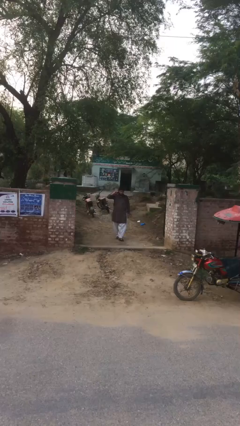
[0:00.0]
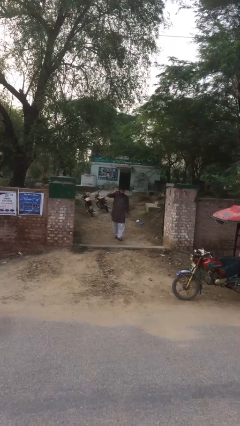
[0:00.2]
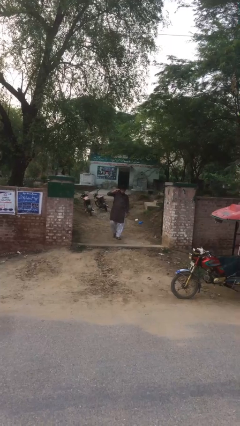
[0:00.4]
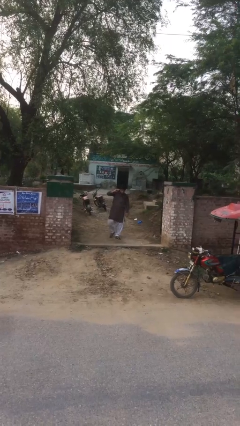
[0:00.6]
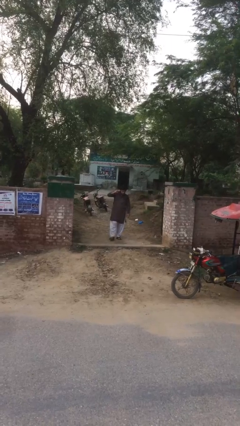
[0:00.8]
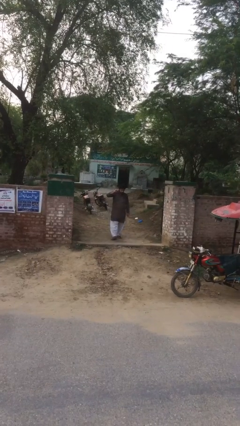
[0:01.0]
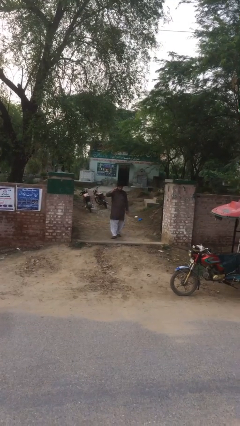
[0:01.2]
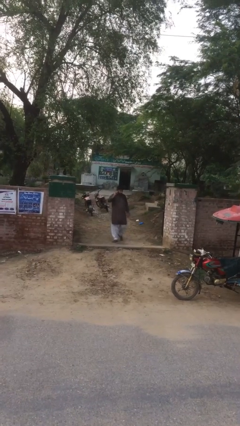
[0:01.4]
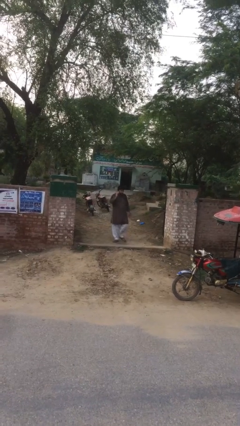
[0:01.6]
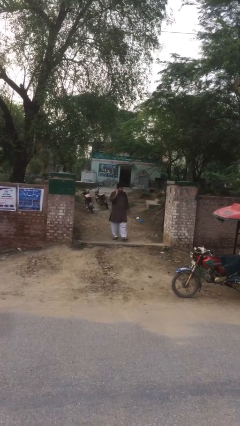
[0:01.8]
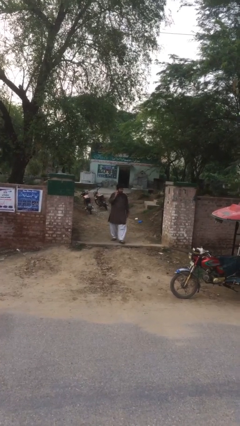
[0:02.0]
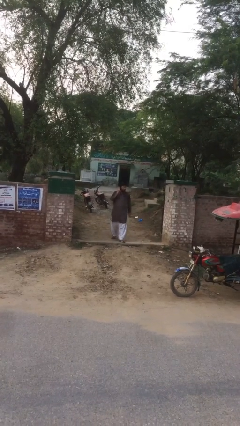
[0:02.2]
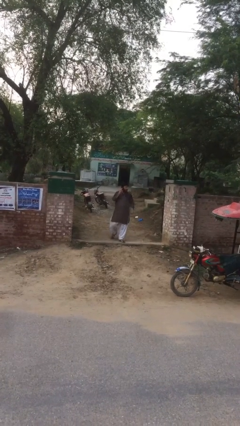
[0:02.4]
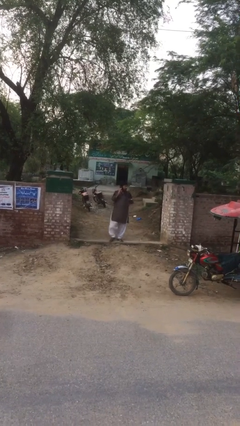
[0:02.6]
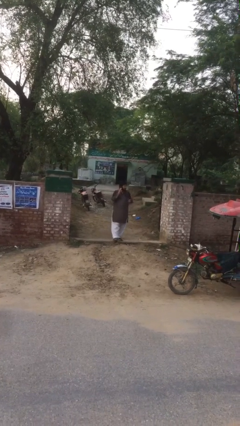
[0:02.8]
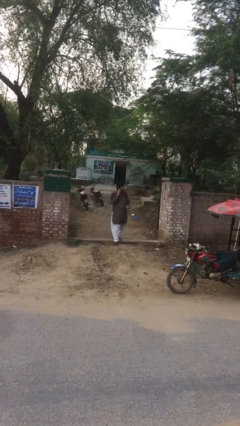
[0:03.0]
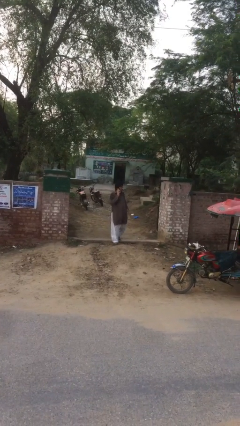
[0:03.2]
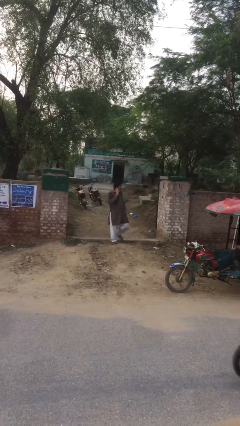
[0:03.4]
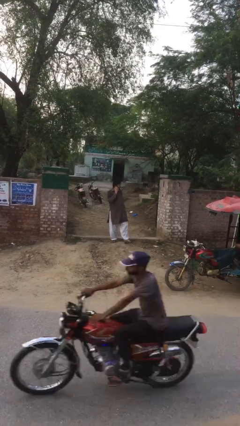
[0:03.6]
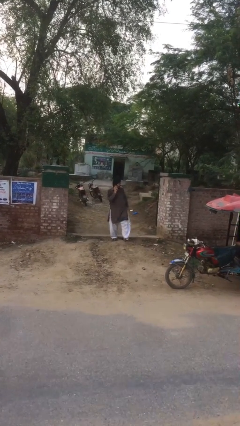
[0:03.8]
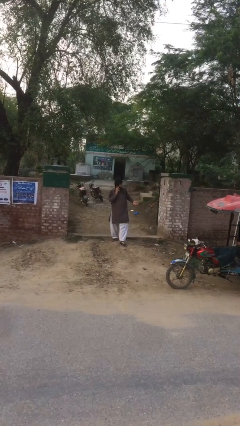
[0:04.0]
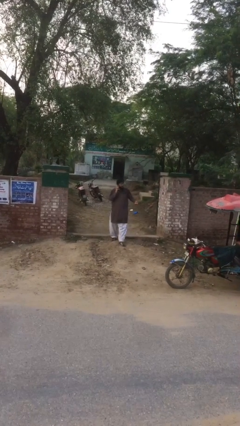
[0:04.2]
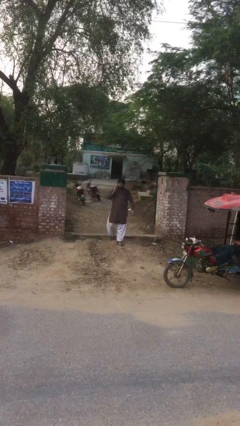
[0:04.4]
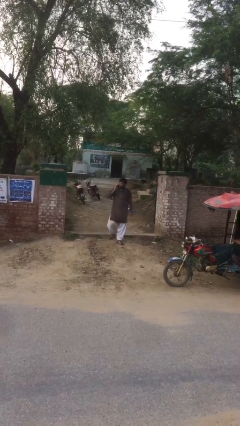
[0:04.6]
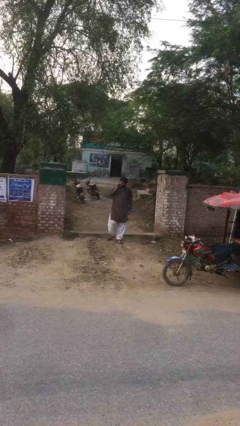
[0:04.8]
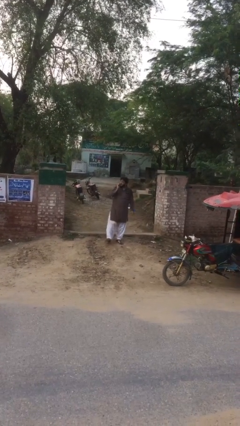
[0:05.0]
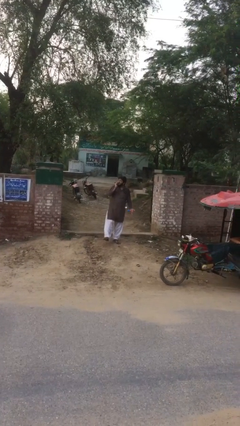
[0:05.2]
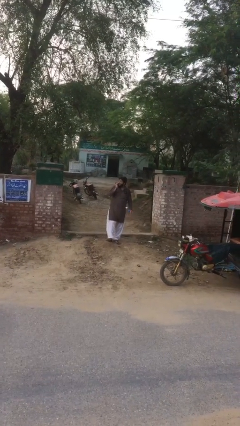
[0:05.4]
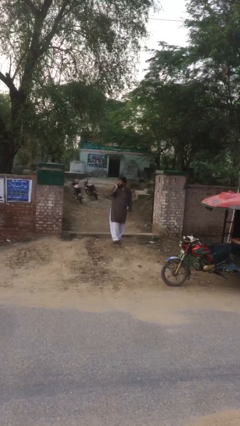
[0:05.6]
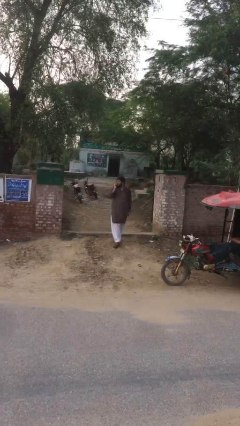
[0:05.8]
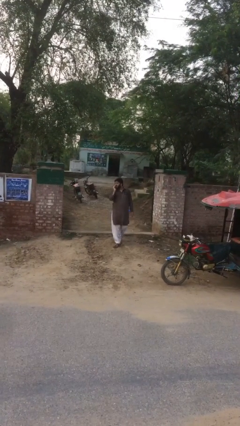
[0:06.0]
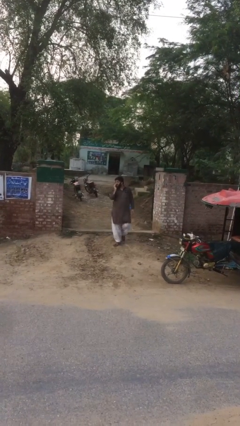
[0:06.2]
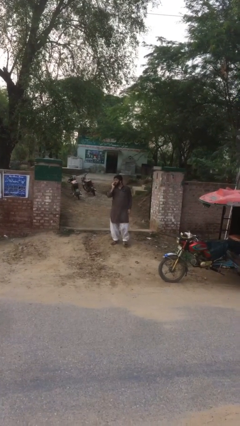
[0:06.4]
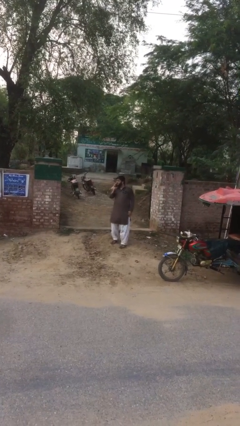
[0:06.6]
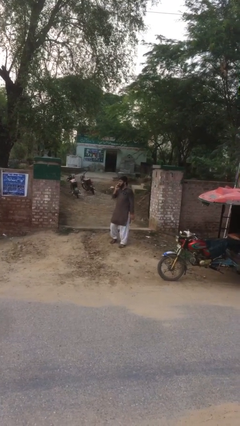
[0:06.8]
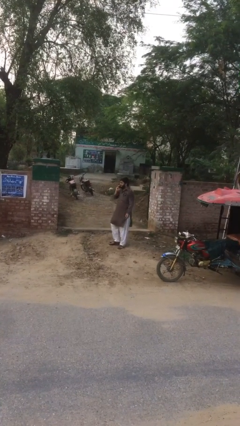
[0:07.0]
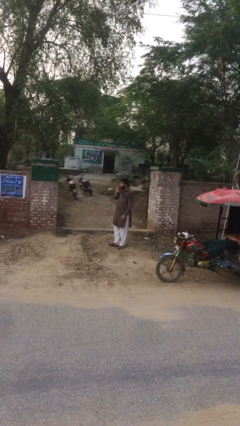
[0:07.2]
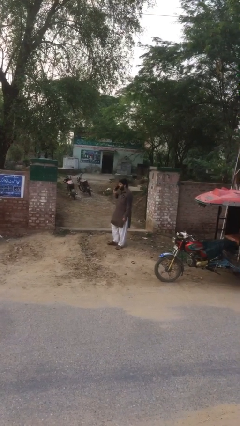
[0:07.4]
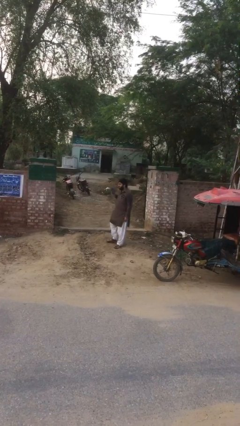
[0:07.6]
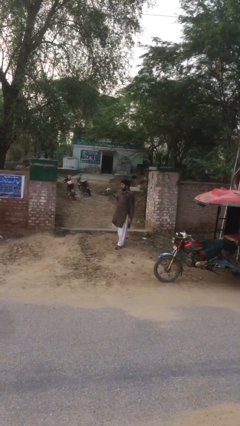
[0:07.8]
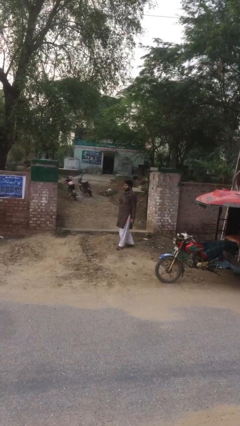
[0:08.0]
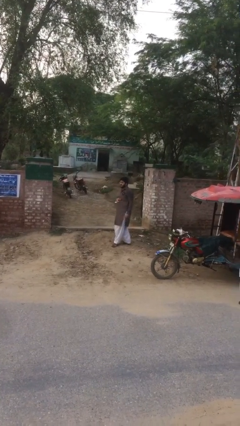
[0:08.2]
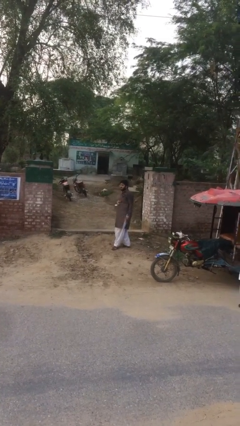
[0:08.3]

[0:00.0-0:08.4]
person enters scene through structure

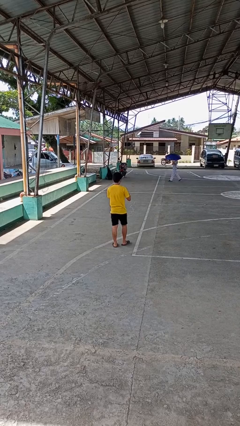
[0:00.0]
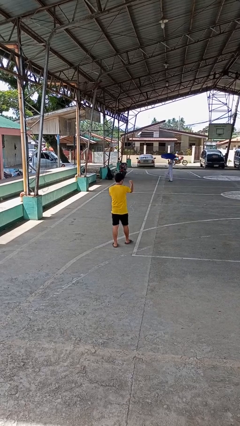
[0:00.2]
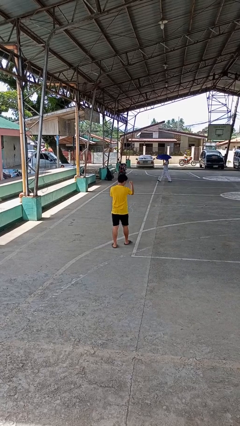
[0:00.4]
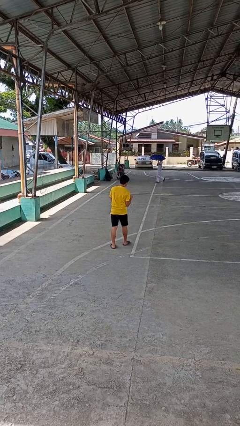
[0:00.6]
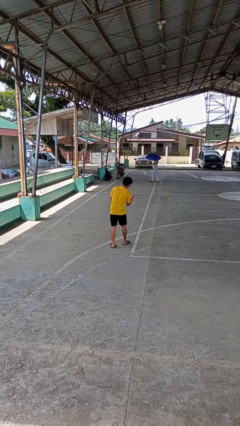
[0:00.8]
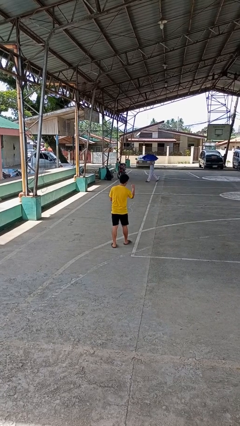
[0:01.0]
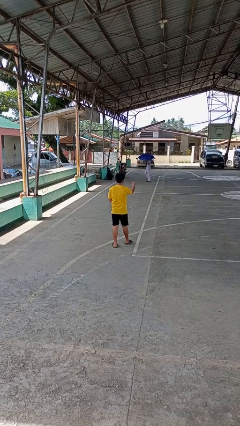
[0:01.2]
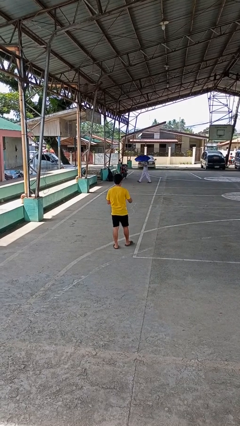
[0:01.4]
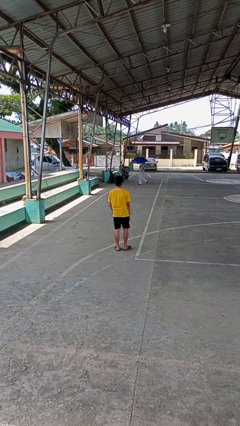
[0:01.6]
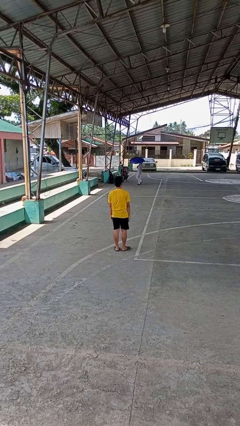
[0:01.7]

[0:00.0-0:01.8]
person punches

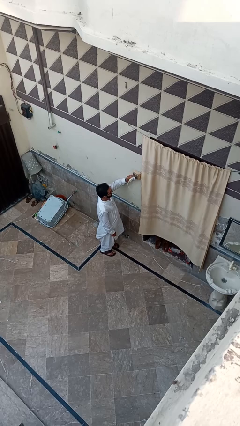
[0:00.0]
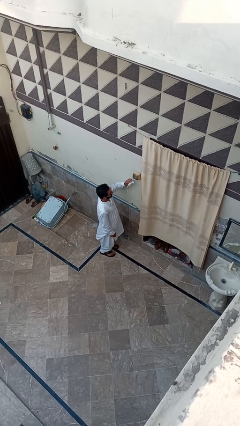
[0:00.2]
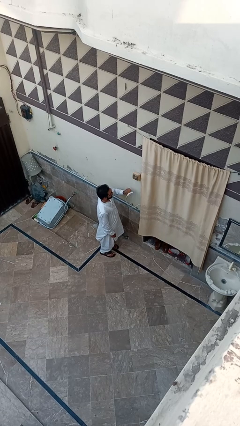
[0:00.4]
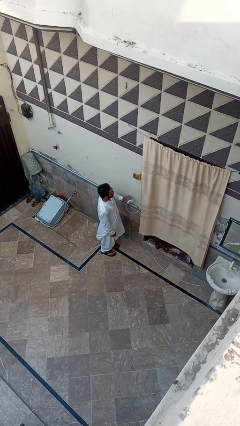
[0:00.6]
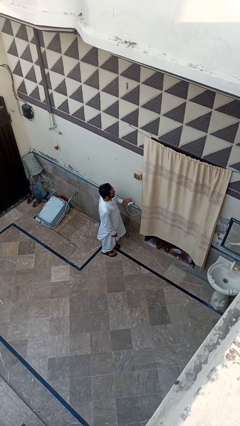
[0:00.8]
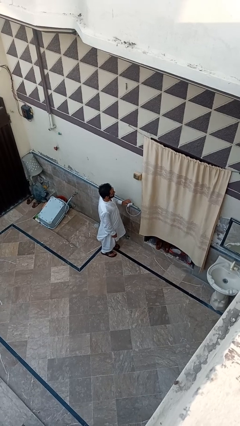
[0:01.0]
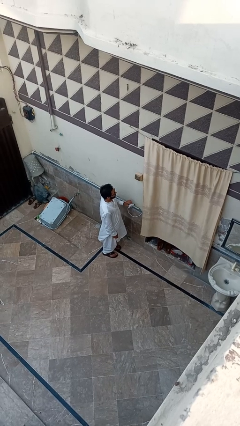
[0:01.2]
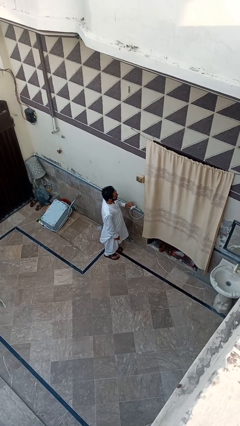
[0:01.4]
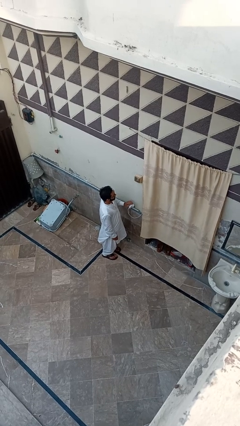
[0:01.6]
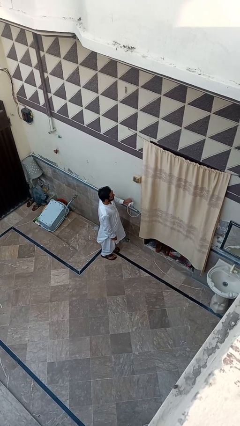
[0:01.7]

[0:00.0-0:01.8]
person unplugs from electrical socket

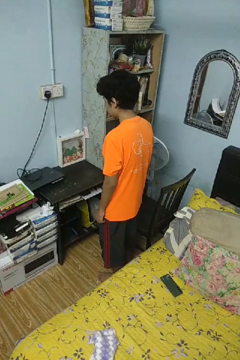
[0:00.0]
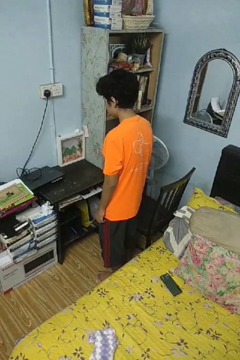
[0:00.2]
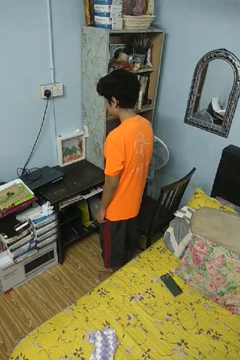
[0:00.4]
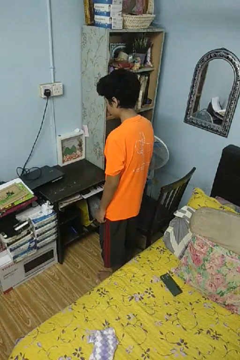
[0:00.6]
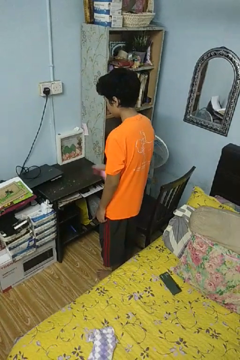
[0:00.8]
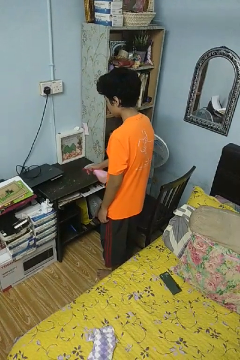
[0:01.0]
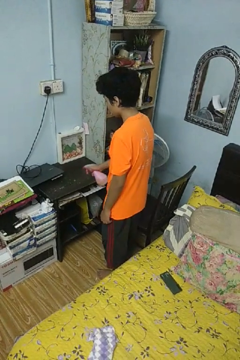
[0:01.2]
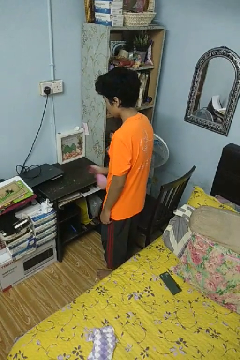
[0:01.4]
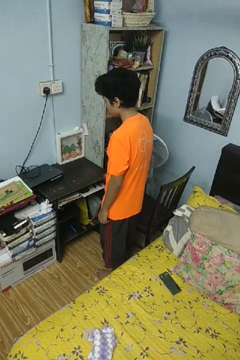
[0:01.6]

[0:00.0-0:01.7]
person sprays from bottle

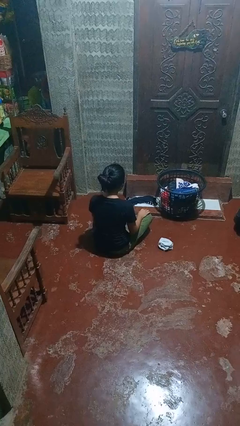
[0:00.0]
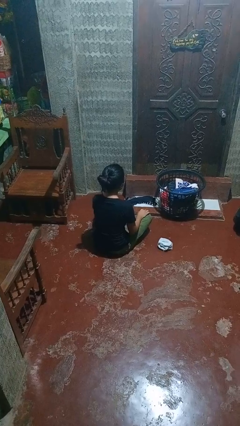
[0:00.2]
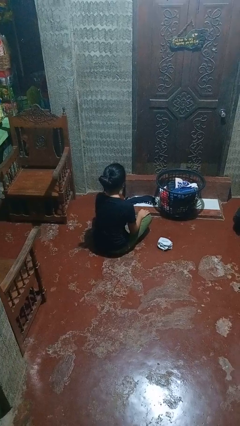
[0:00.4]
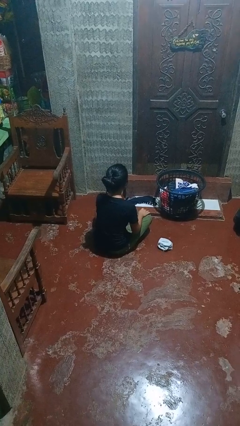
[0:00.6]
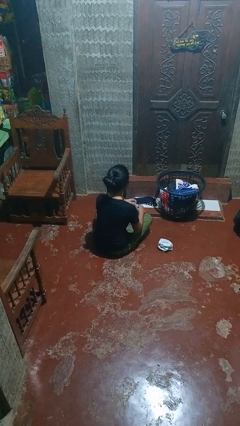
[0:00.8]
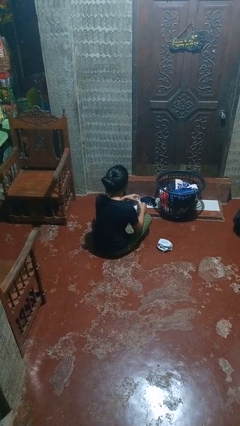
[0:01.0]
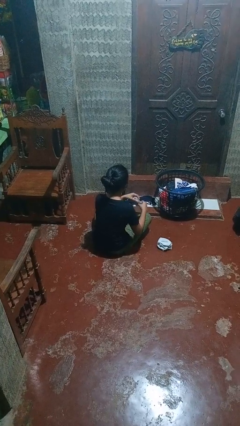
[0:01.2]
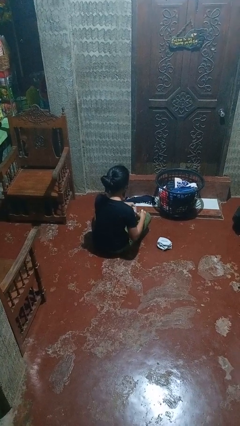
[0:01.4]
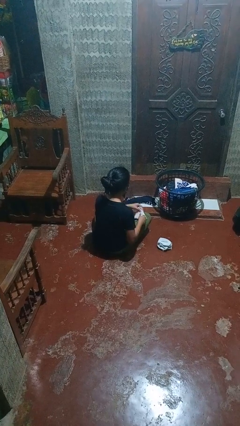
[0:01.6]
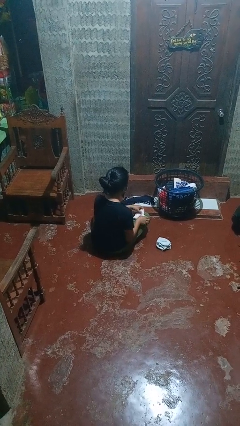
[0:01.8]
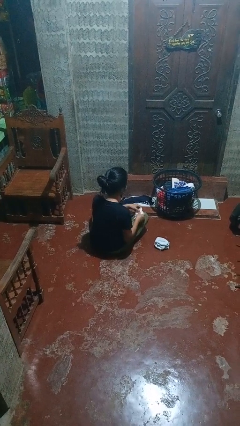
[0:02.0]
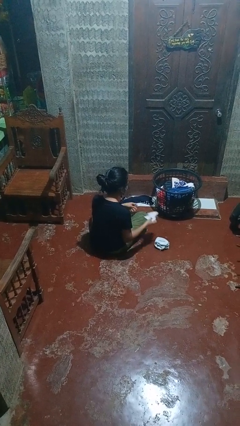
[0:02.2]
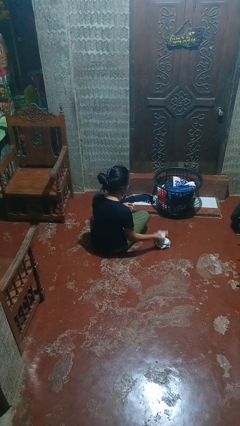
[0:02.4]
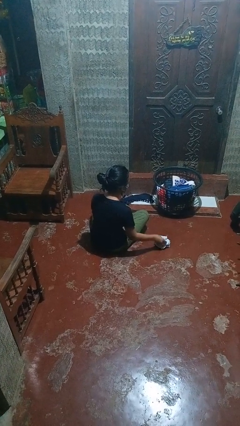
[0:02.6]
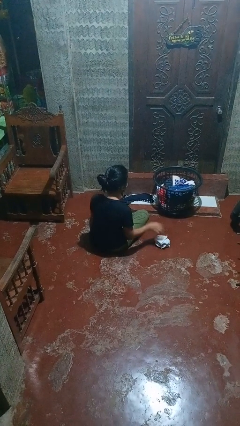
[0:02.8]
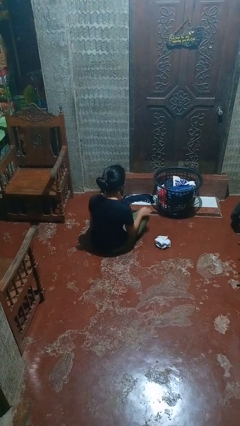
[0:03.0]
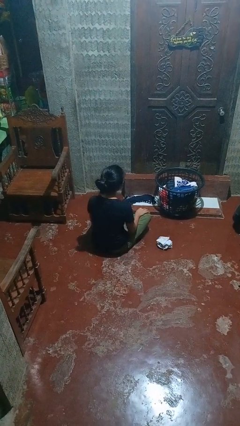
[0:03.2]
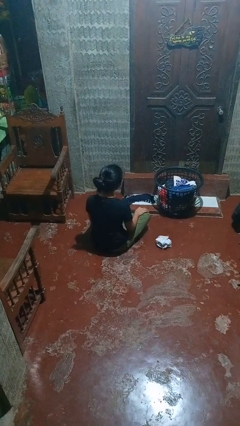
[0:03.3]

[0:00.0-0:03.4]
person folds socks

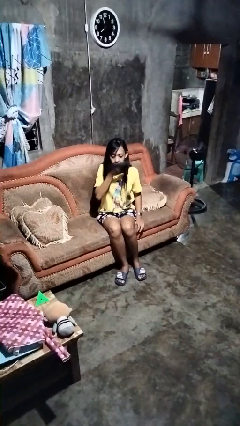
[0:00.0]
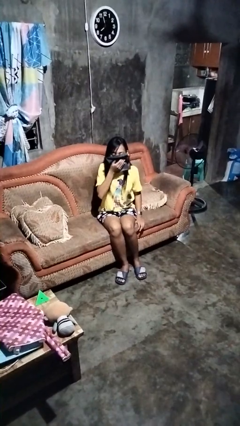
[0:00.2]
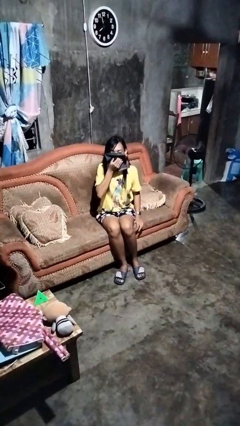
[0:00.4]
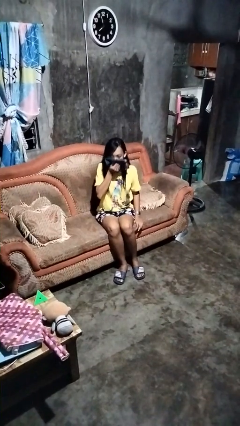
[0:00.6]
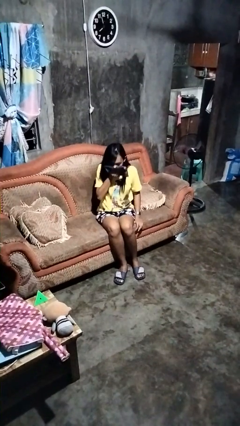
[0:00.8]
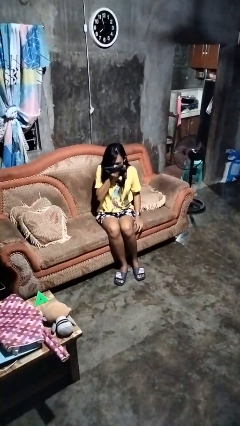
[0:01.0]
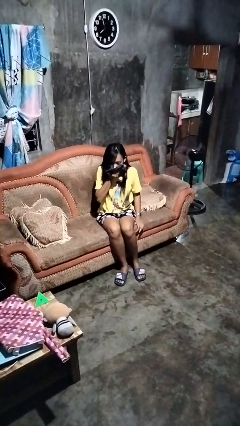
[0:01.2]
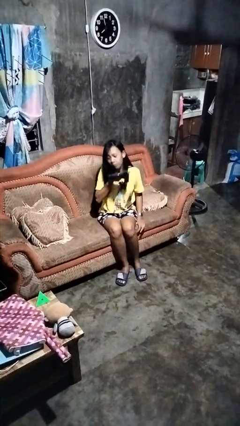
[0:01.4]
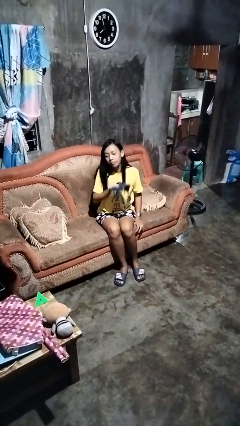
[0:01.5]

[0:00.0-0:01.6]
person blows nose
